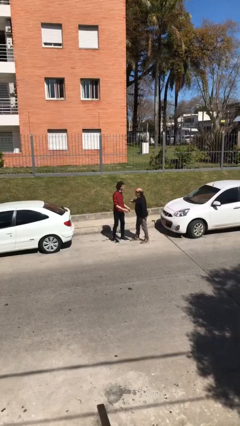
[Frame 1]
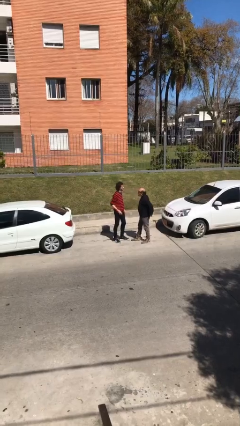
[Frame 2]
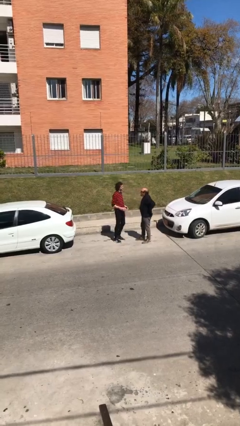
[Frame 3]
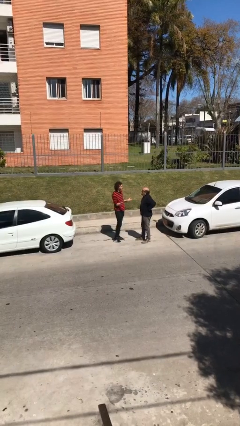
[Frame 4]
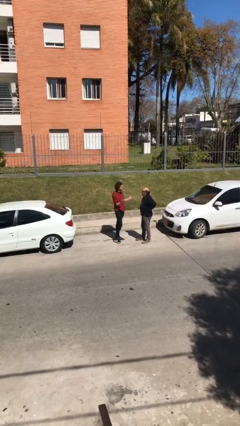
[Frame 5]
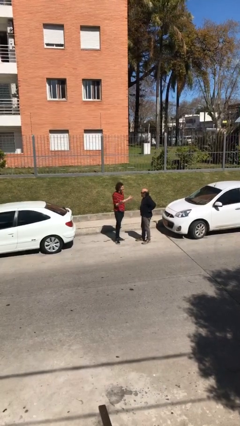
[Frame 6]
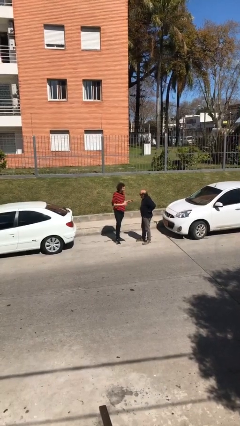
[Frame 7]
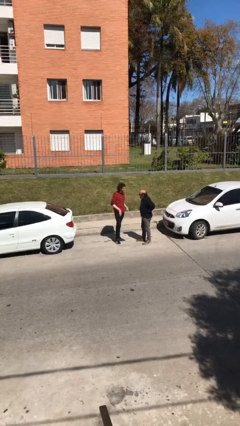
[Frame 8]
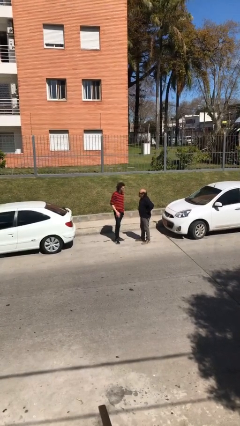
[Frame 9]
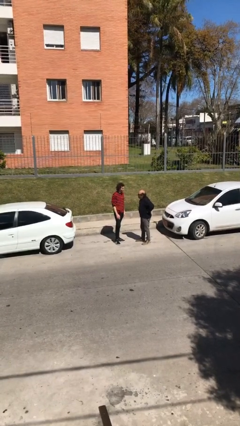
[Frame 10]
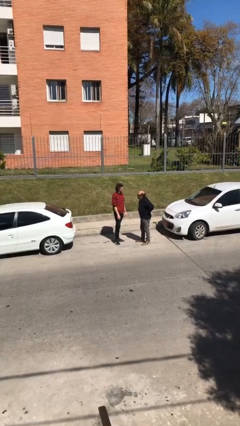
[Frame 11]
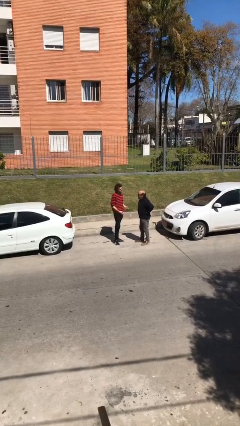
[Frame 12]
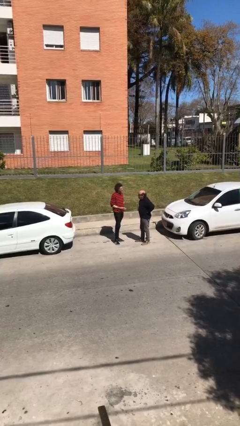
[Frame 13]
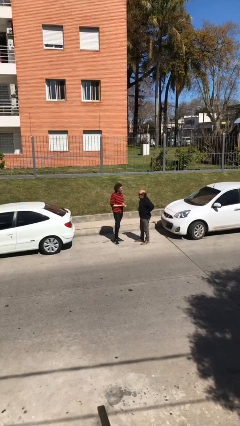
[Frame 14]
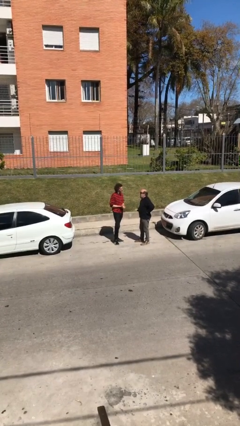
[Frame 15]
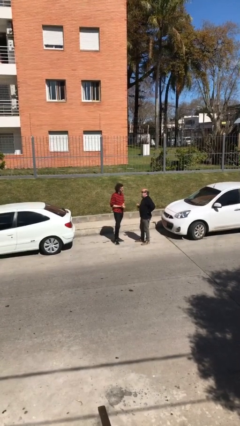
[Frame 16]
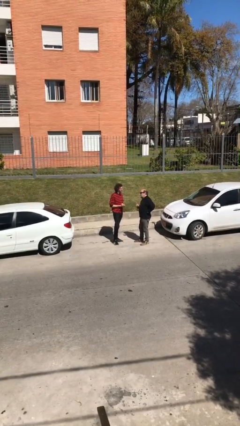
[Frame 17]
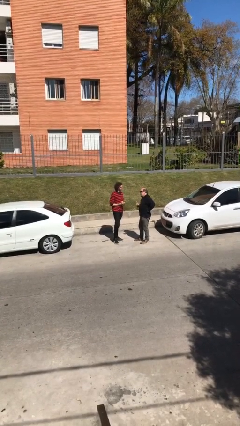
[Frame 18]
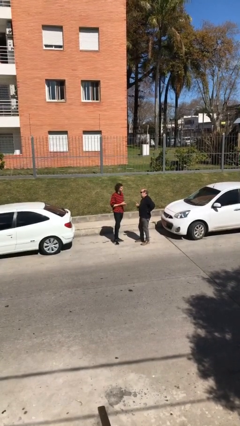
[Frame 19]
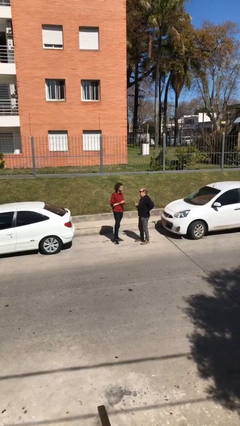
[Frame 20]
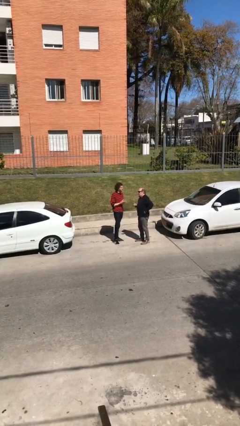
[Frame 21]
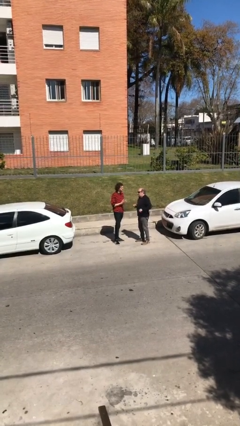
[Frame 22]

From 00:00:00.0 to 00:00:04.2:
person talks to person

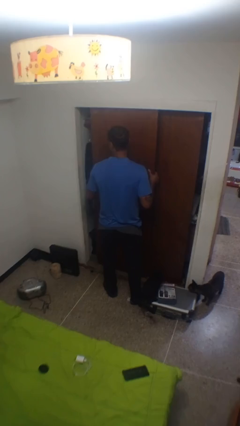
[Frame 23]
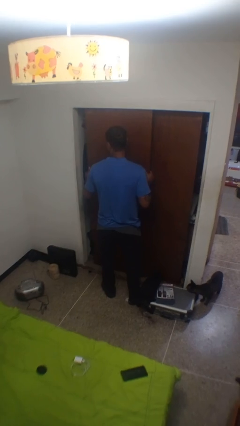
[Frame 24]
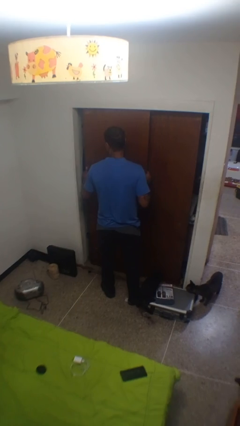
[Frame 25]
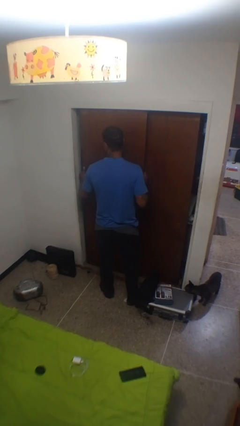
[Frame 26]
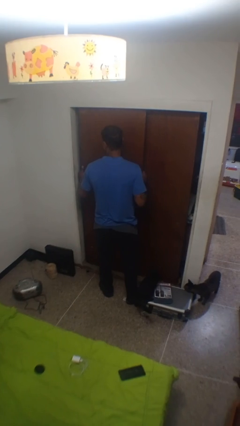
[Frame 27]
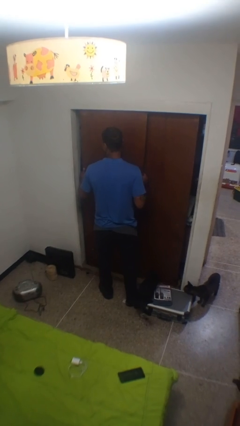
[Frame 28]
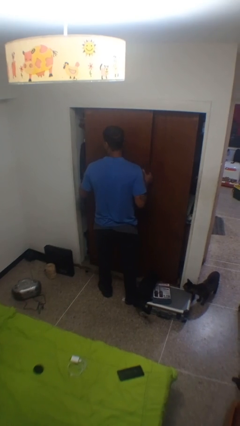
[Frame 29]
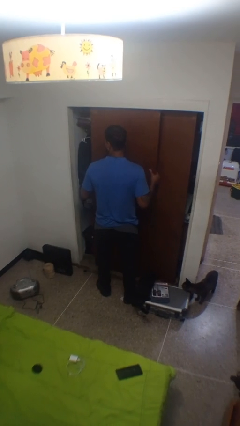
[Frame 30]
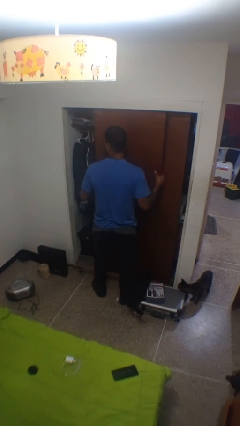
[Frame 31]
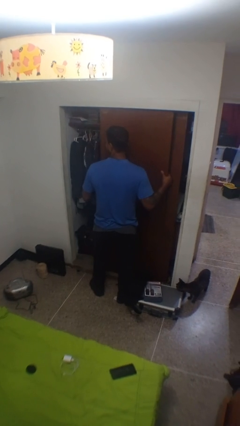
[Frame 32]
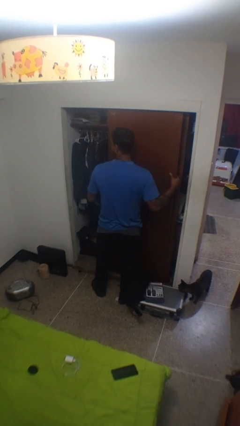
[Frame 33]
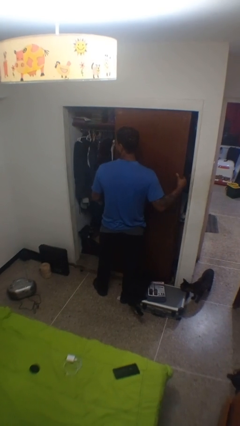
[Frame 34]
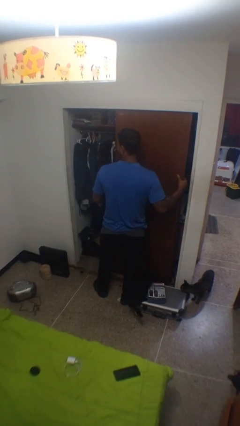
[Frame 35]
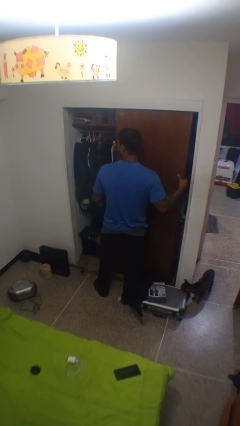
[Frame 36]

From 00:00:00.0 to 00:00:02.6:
person opens closet door

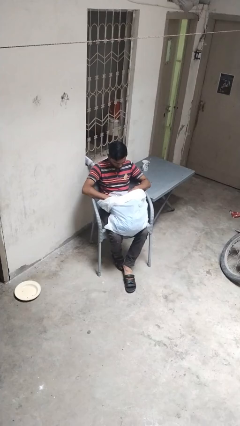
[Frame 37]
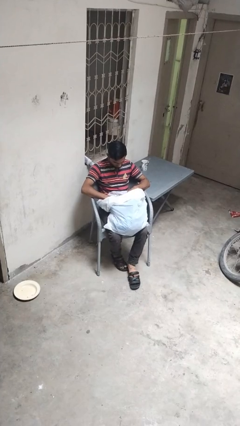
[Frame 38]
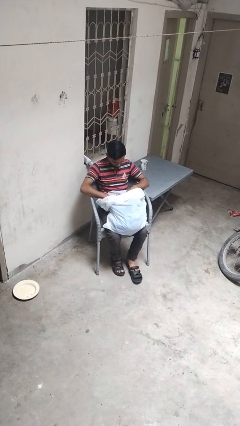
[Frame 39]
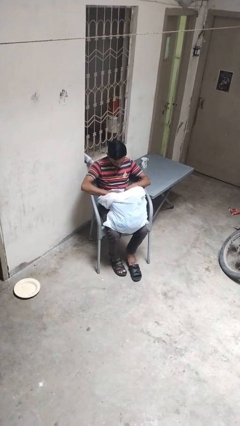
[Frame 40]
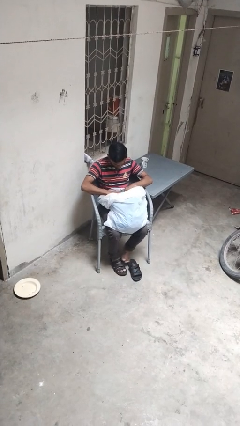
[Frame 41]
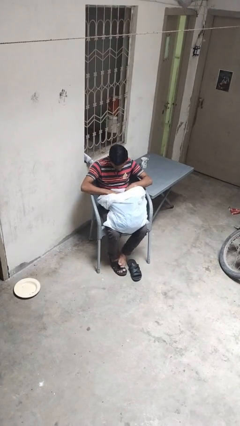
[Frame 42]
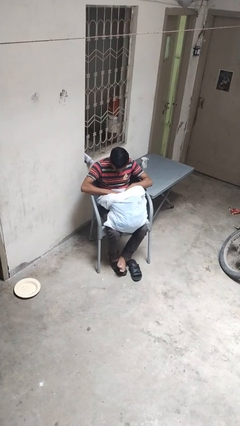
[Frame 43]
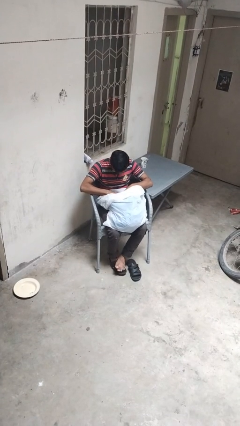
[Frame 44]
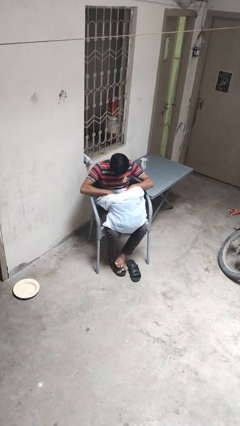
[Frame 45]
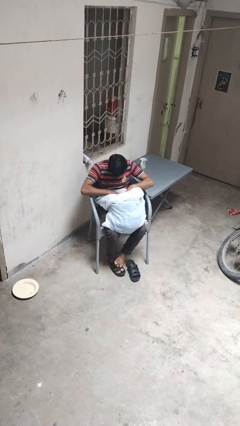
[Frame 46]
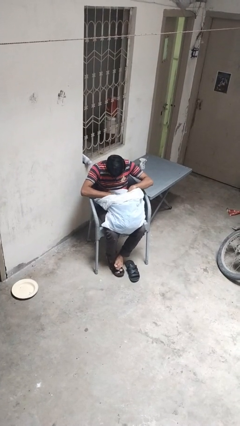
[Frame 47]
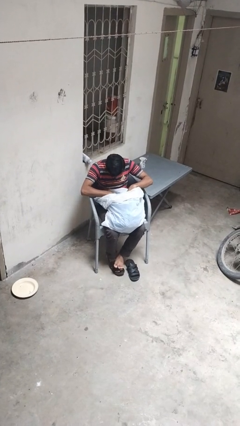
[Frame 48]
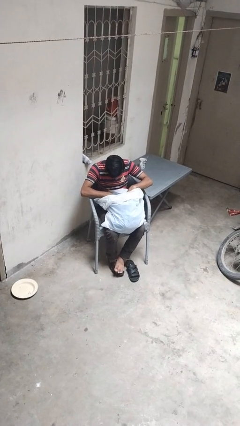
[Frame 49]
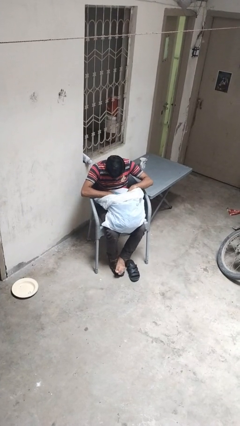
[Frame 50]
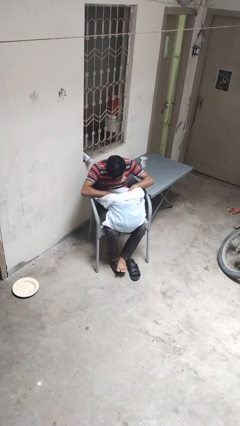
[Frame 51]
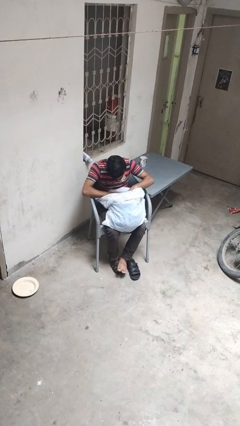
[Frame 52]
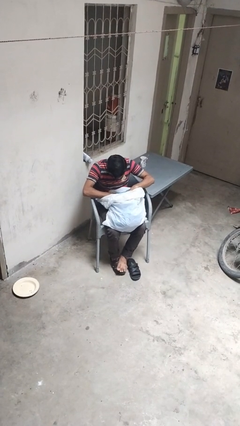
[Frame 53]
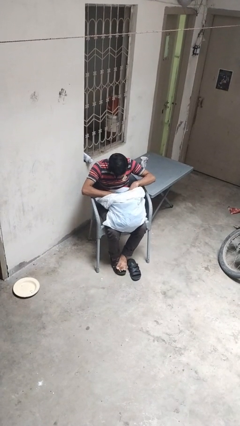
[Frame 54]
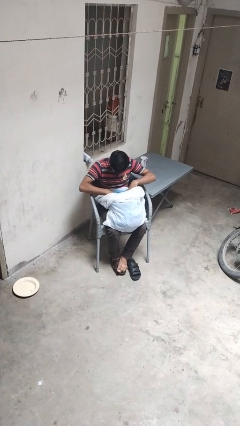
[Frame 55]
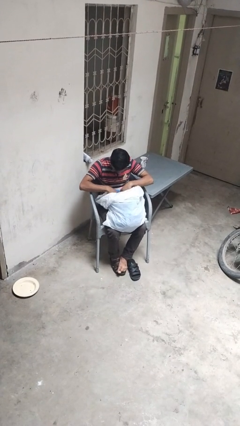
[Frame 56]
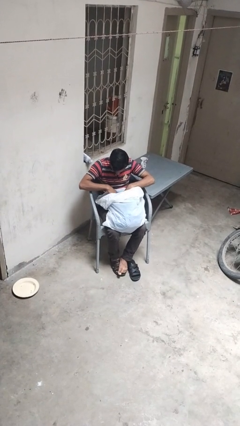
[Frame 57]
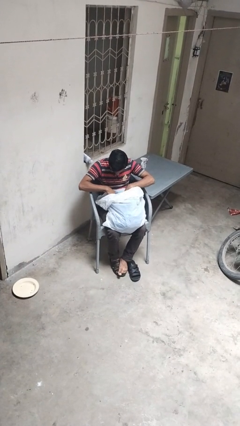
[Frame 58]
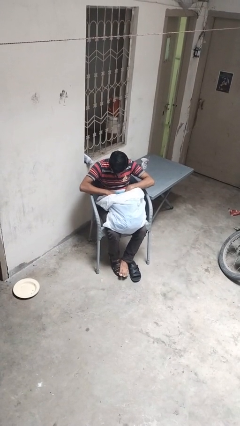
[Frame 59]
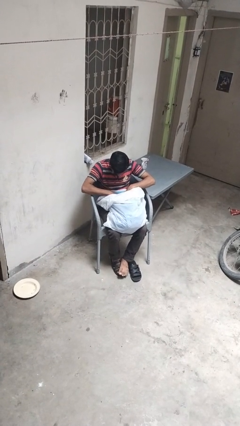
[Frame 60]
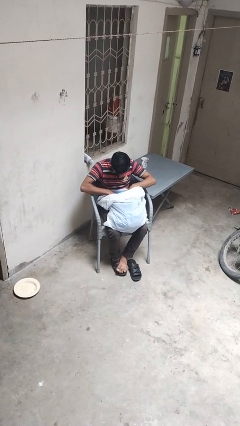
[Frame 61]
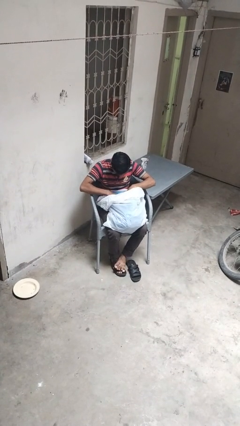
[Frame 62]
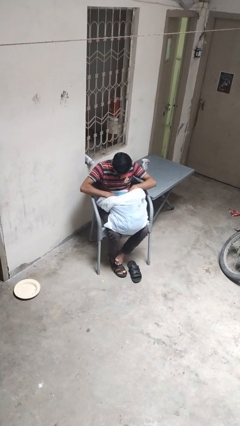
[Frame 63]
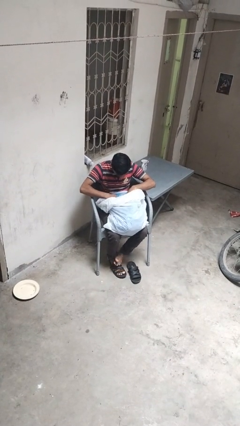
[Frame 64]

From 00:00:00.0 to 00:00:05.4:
person searches in bag

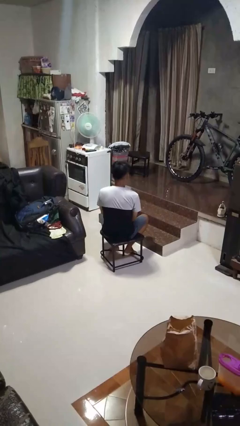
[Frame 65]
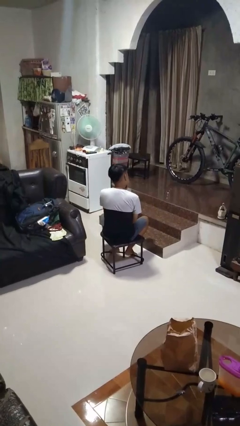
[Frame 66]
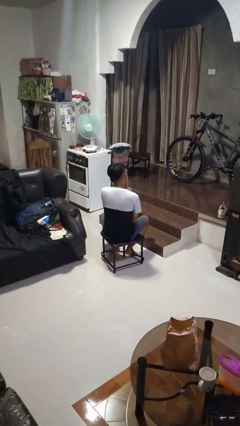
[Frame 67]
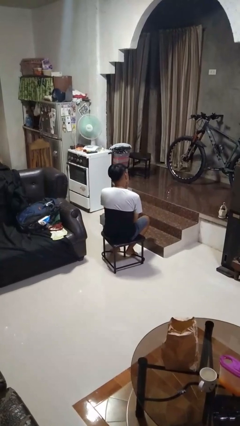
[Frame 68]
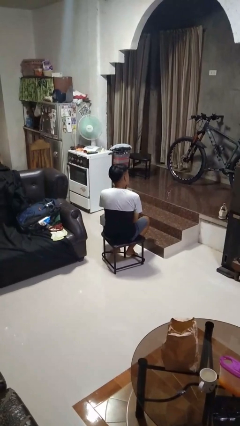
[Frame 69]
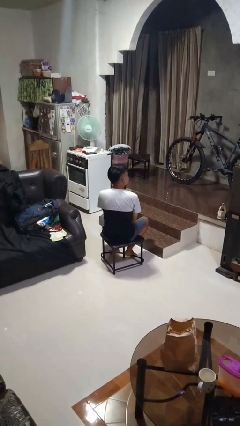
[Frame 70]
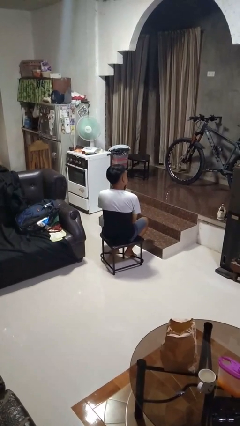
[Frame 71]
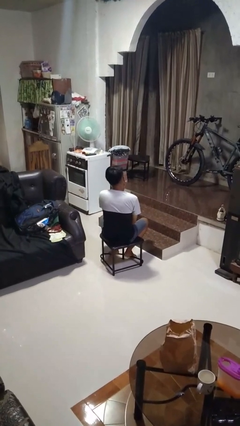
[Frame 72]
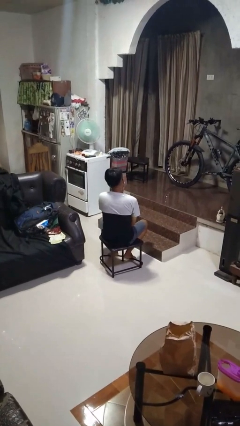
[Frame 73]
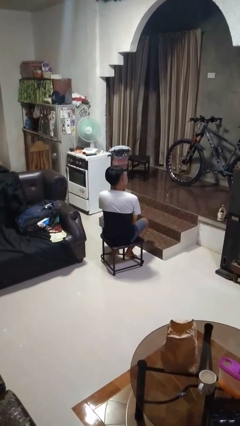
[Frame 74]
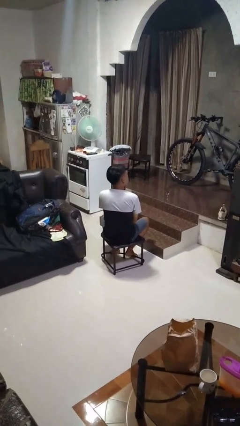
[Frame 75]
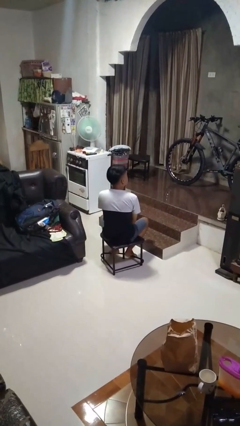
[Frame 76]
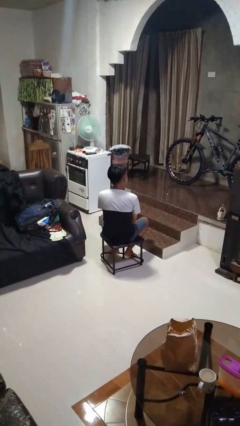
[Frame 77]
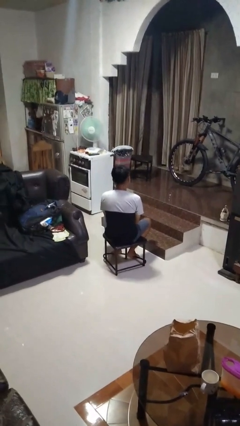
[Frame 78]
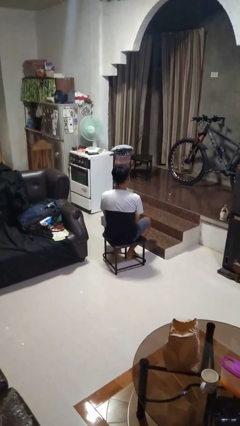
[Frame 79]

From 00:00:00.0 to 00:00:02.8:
person strokes chin

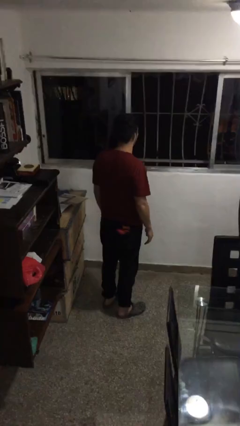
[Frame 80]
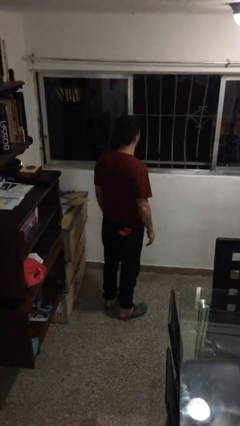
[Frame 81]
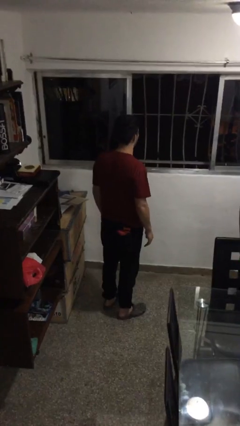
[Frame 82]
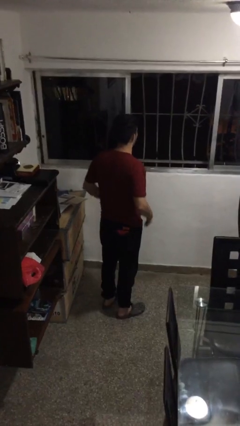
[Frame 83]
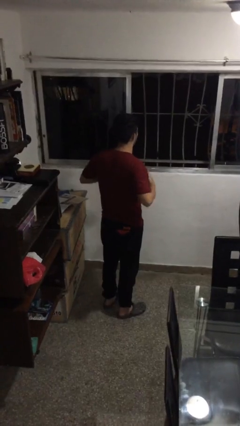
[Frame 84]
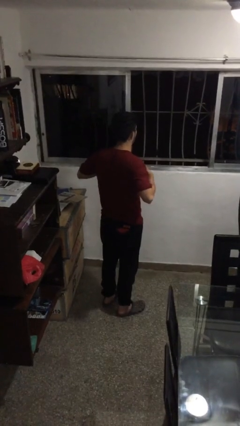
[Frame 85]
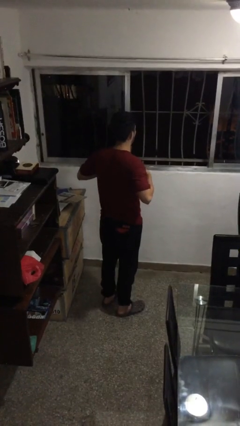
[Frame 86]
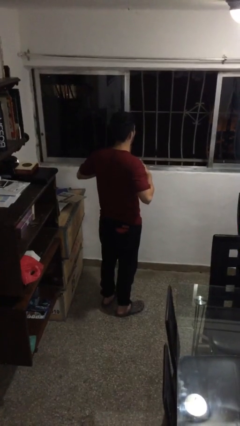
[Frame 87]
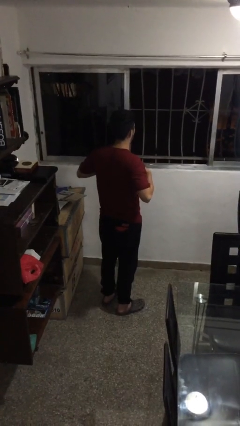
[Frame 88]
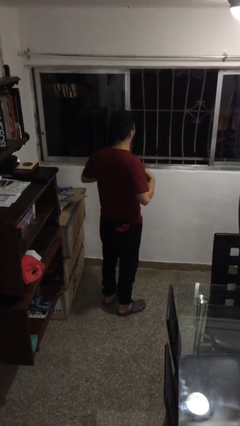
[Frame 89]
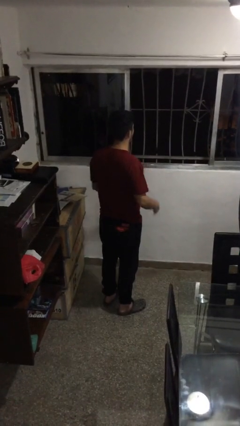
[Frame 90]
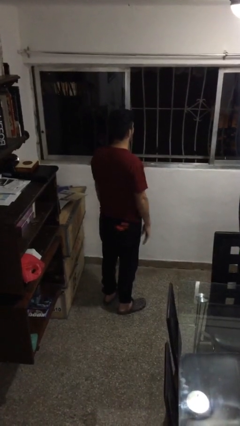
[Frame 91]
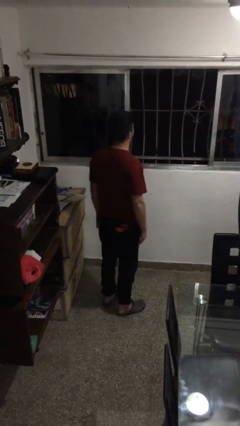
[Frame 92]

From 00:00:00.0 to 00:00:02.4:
person drums on chest
